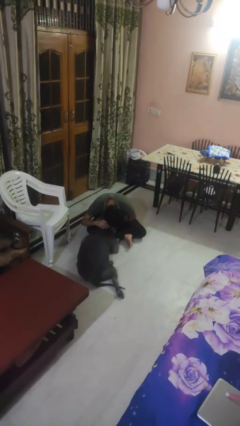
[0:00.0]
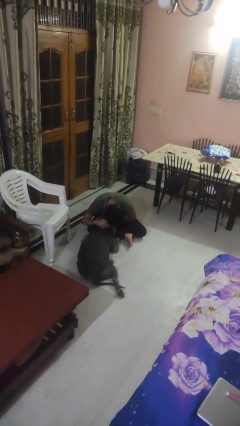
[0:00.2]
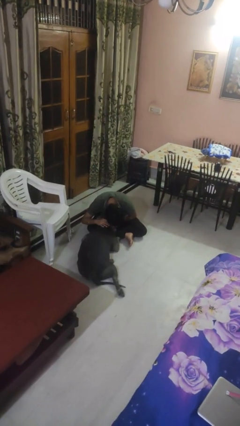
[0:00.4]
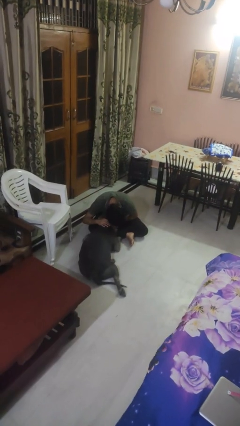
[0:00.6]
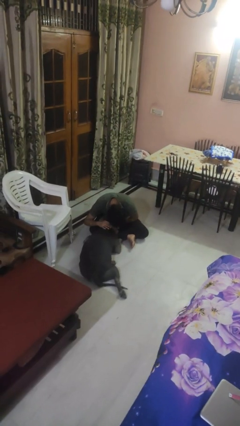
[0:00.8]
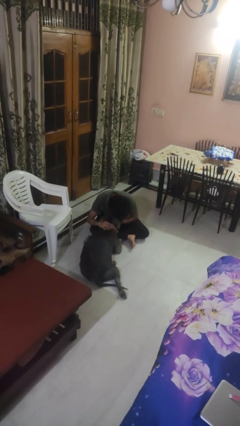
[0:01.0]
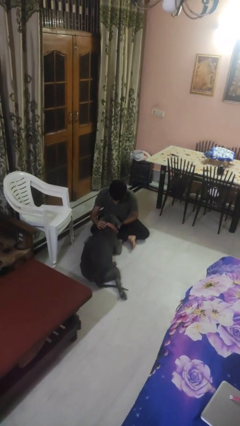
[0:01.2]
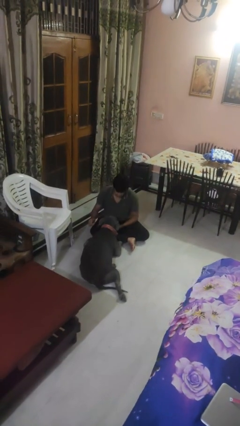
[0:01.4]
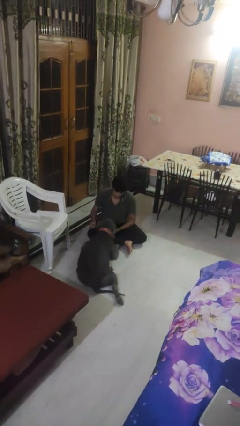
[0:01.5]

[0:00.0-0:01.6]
person hugs dog

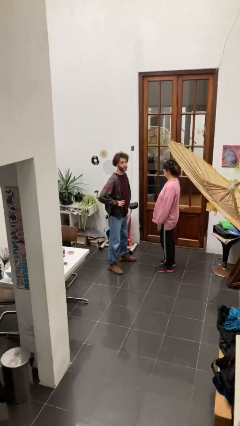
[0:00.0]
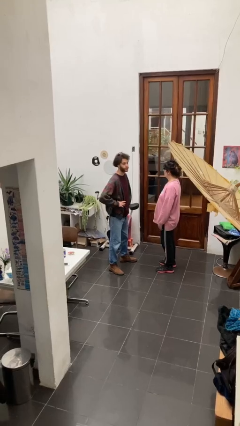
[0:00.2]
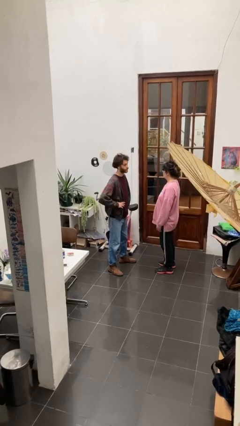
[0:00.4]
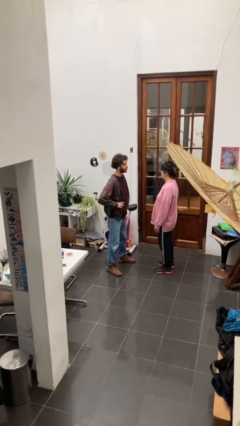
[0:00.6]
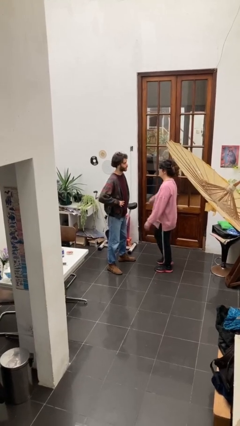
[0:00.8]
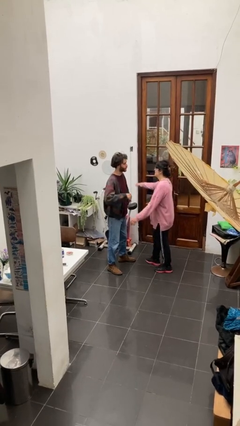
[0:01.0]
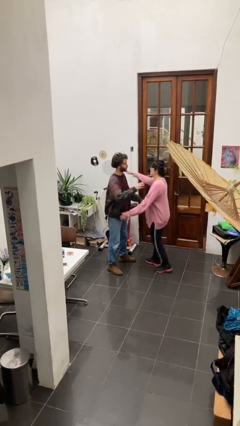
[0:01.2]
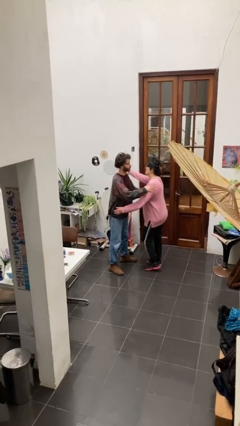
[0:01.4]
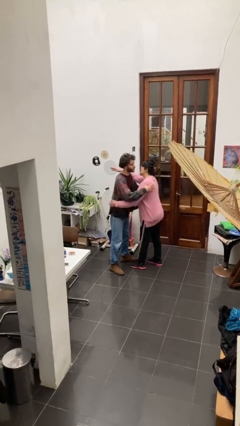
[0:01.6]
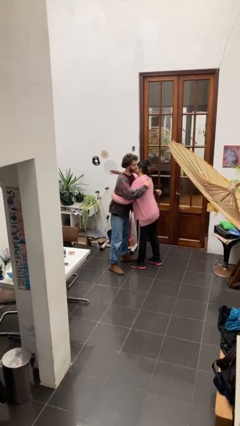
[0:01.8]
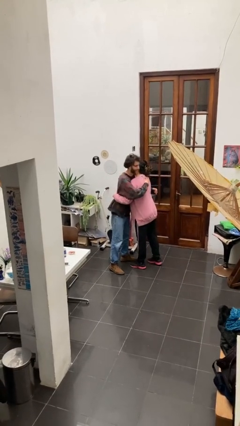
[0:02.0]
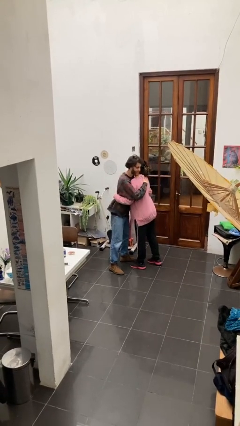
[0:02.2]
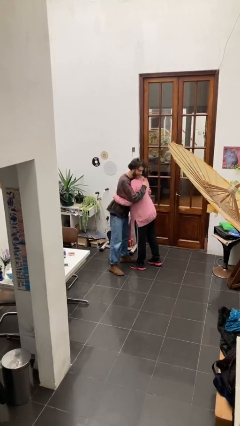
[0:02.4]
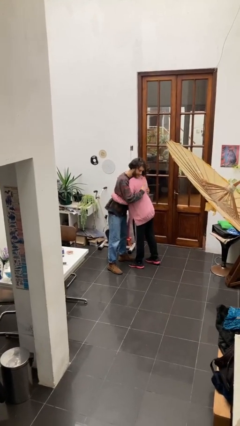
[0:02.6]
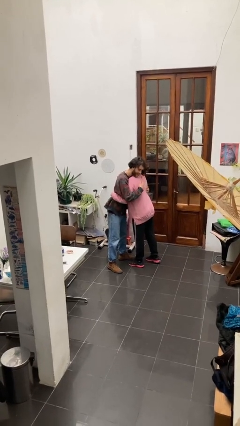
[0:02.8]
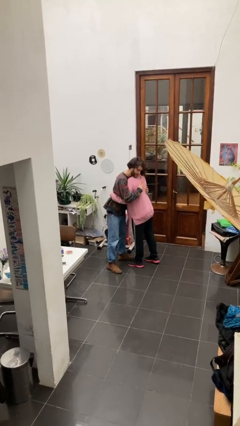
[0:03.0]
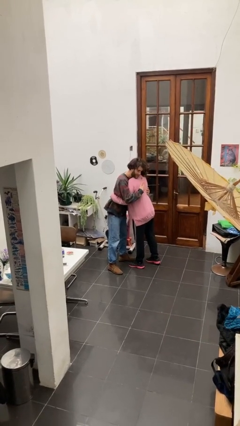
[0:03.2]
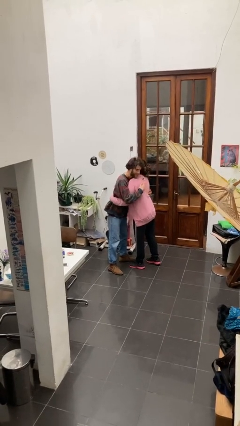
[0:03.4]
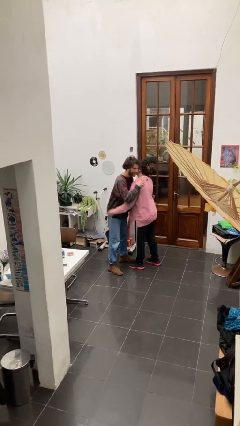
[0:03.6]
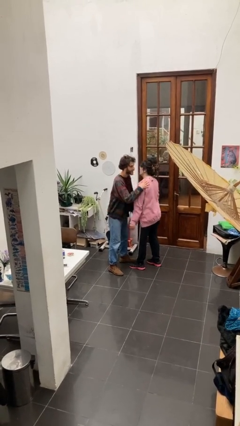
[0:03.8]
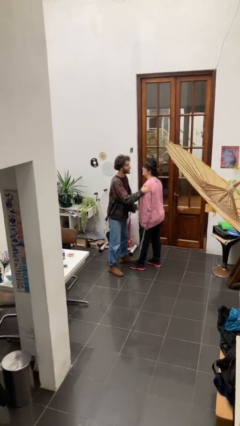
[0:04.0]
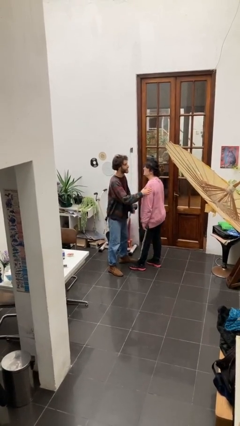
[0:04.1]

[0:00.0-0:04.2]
person embraces person

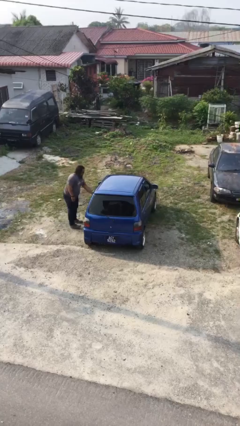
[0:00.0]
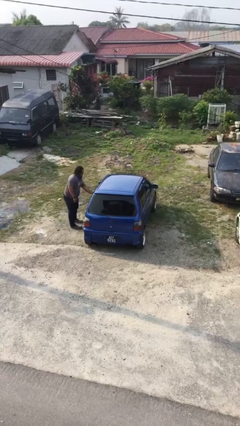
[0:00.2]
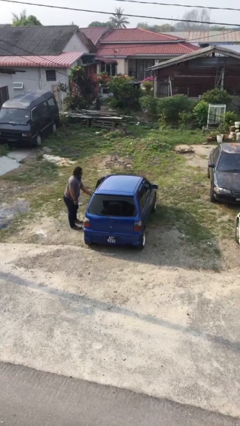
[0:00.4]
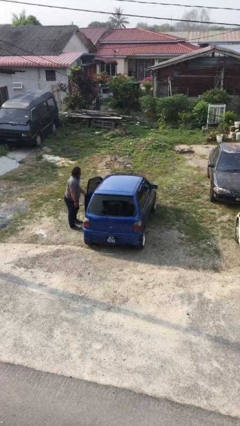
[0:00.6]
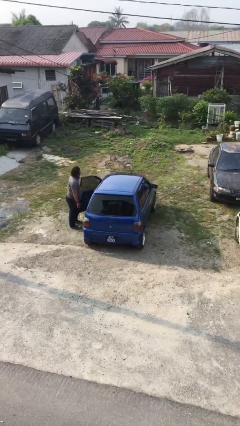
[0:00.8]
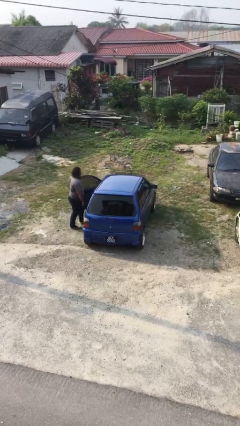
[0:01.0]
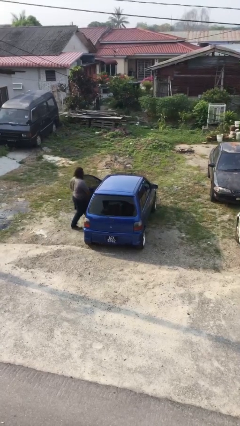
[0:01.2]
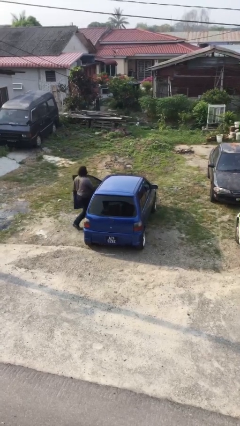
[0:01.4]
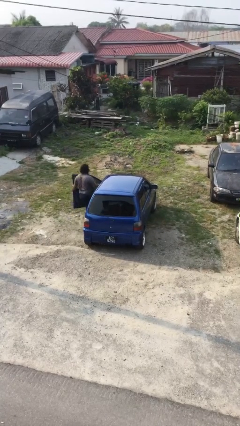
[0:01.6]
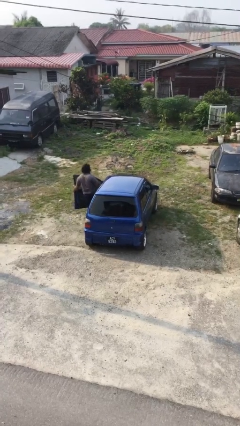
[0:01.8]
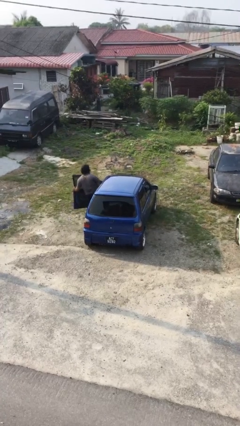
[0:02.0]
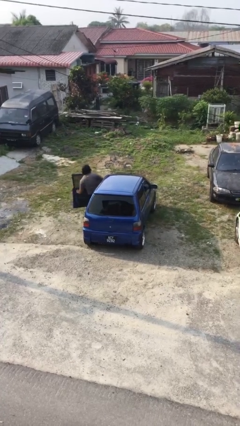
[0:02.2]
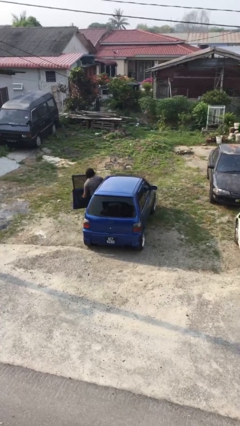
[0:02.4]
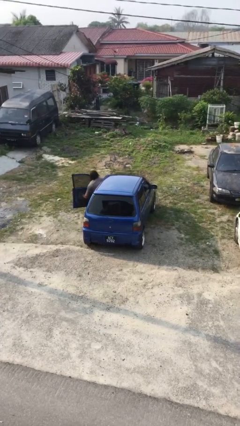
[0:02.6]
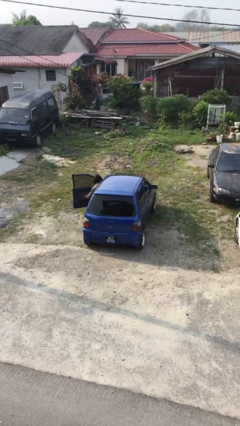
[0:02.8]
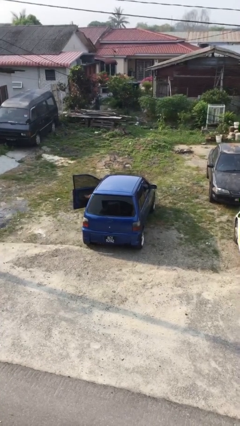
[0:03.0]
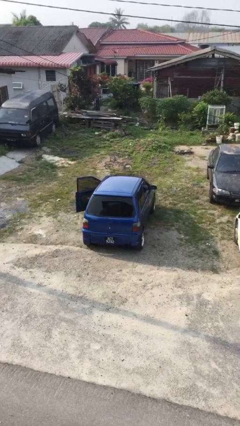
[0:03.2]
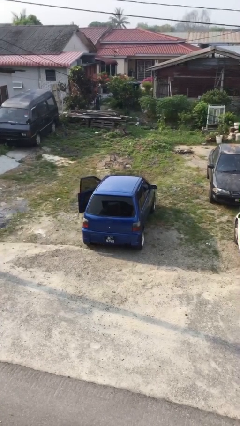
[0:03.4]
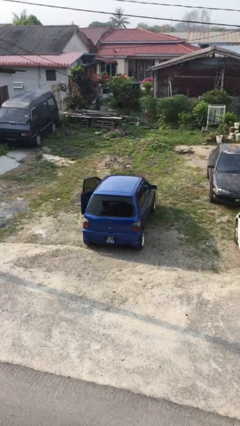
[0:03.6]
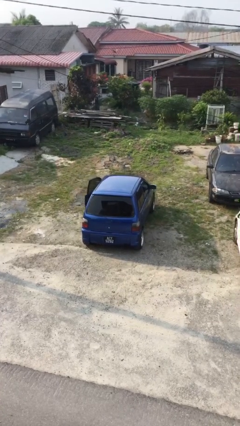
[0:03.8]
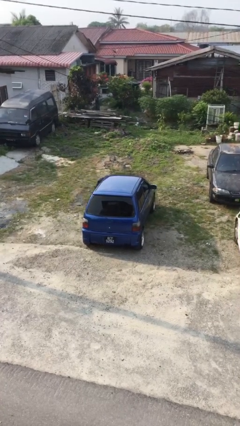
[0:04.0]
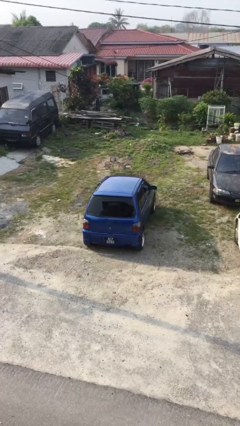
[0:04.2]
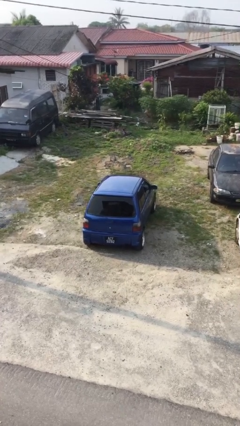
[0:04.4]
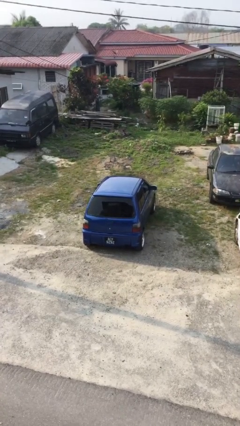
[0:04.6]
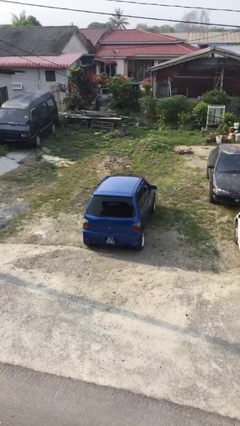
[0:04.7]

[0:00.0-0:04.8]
car picks up person

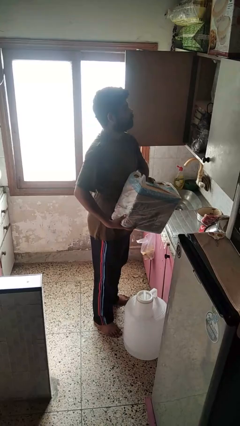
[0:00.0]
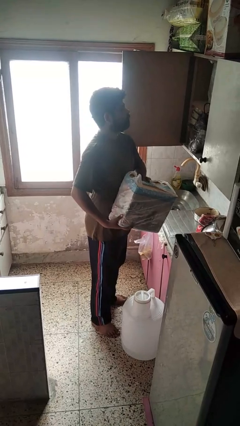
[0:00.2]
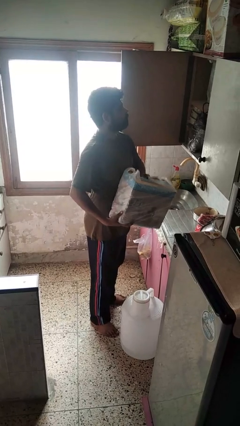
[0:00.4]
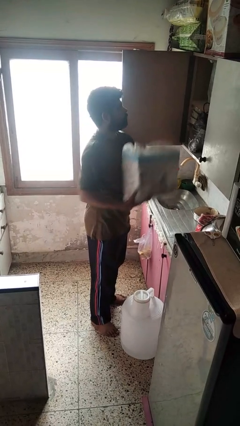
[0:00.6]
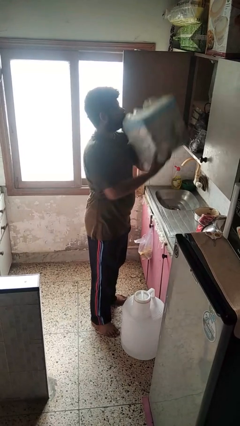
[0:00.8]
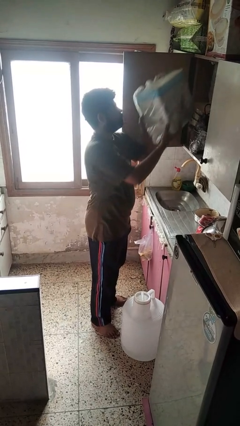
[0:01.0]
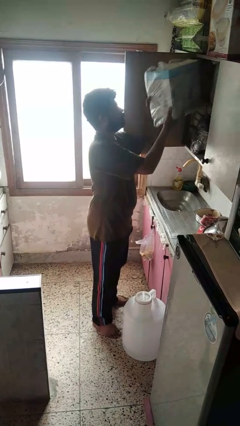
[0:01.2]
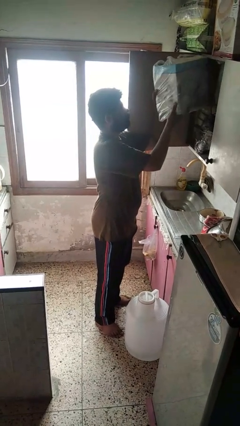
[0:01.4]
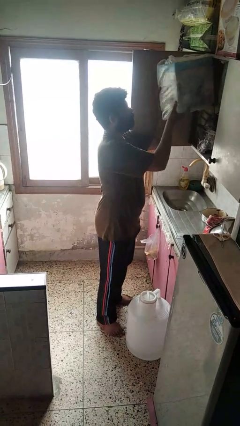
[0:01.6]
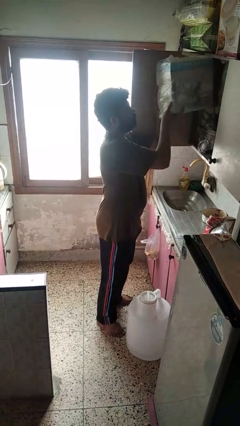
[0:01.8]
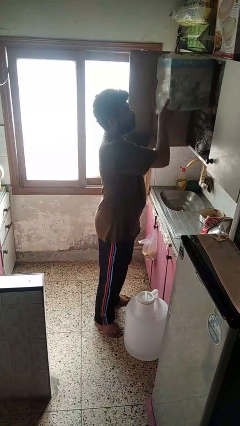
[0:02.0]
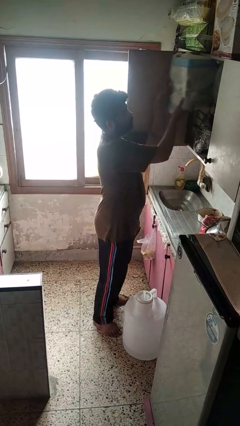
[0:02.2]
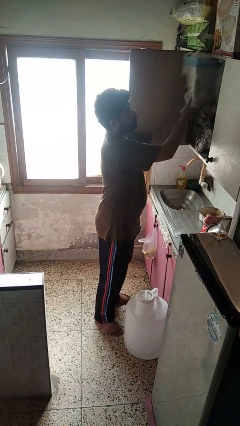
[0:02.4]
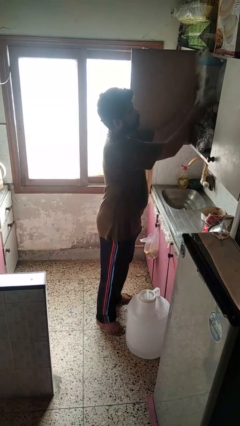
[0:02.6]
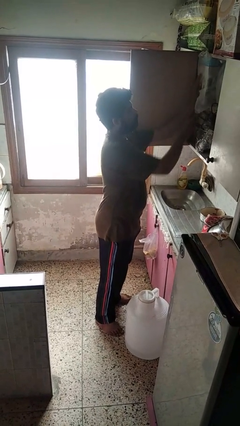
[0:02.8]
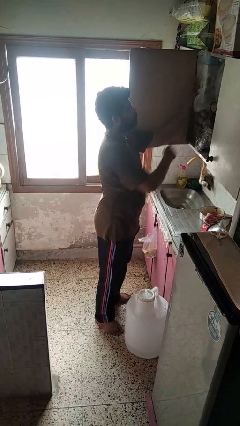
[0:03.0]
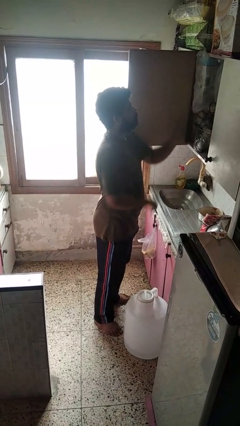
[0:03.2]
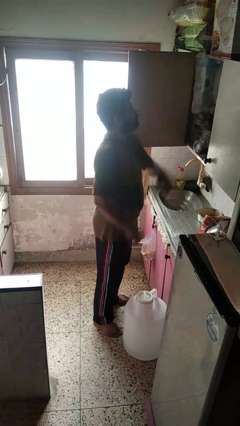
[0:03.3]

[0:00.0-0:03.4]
person puts down object into cabinet

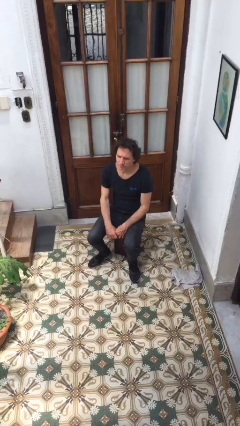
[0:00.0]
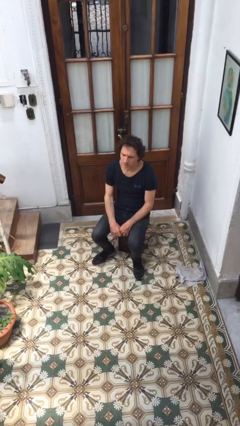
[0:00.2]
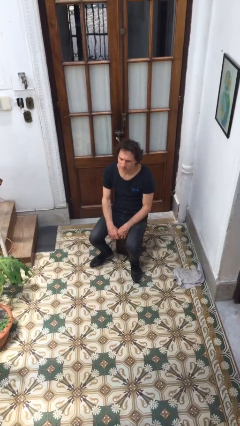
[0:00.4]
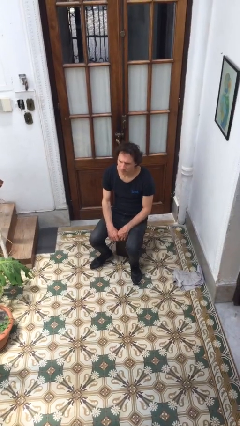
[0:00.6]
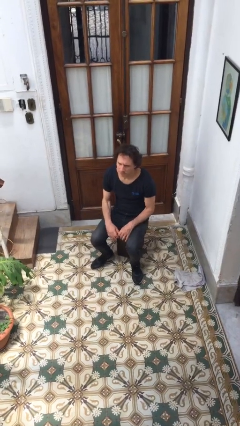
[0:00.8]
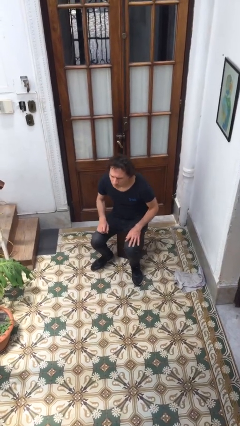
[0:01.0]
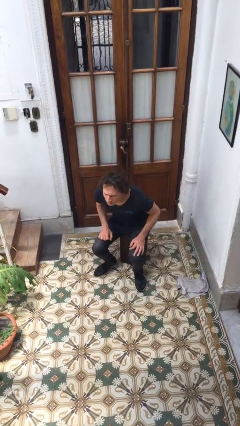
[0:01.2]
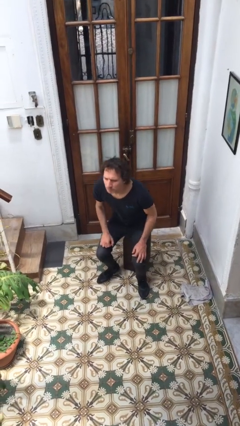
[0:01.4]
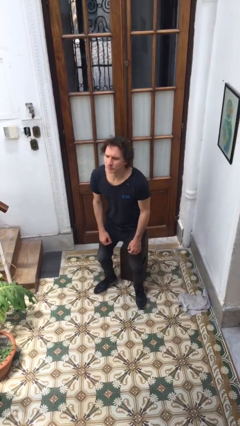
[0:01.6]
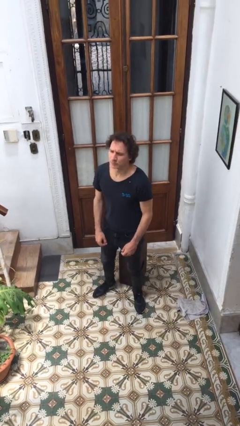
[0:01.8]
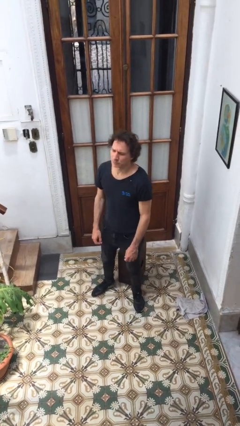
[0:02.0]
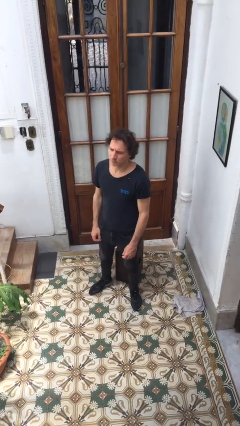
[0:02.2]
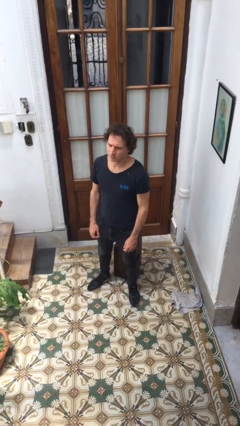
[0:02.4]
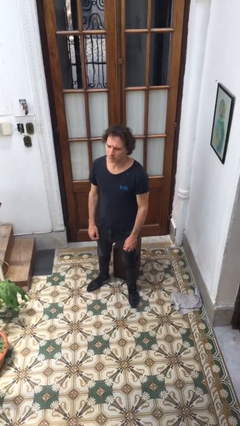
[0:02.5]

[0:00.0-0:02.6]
person stands up

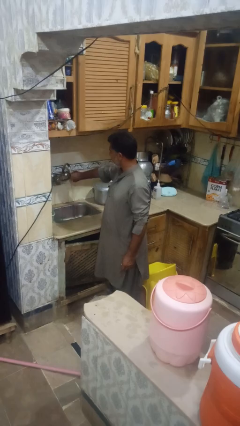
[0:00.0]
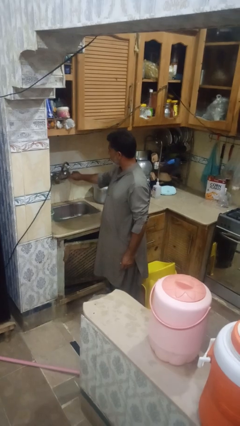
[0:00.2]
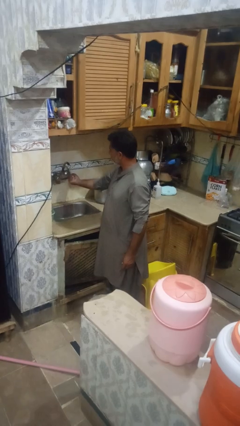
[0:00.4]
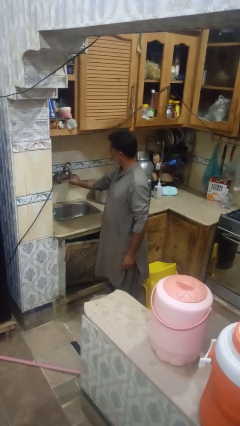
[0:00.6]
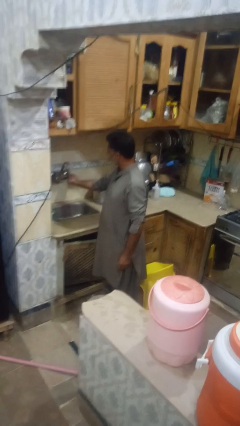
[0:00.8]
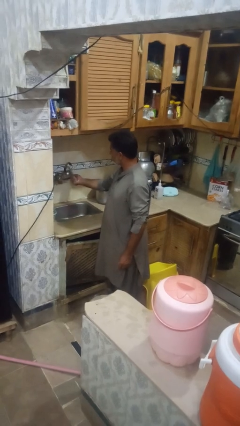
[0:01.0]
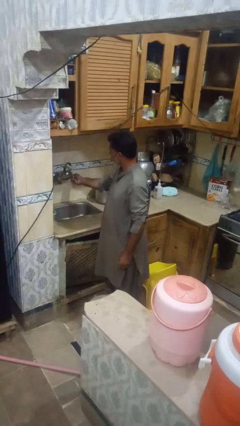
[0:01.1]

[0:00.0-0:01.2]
person turns off faucet
